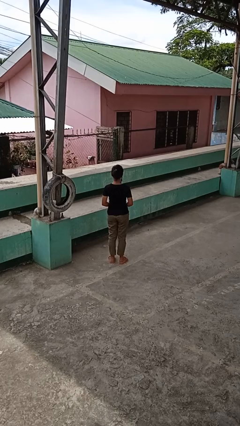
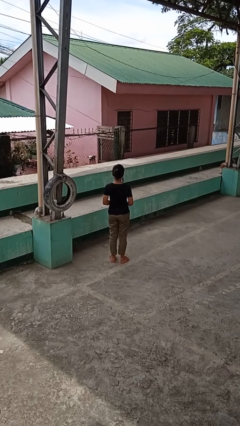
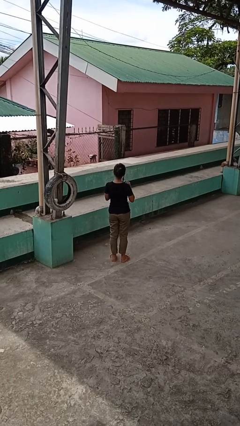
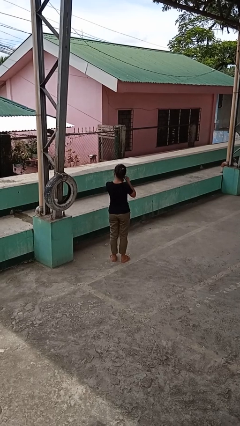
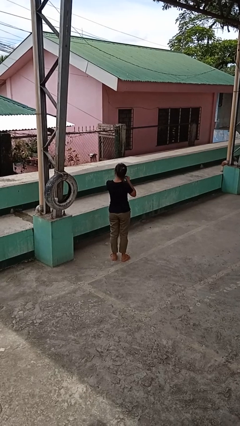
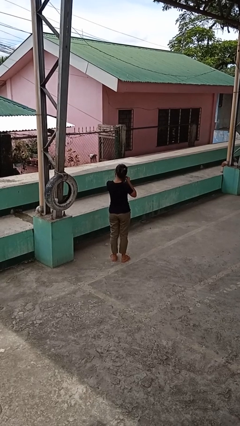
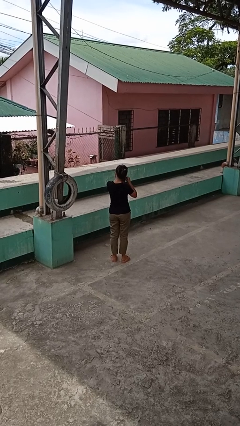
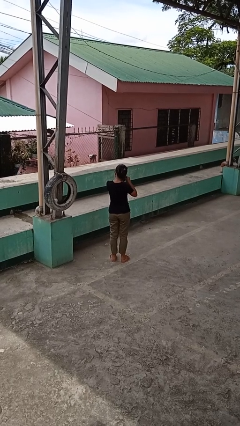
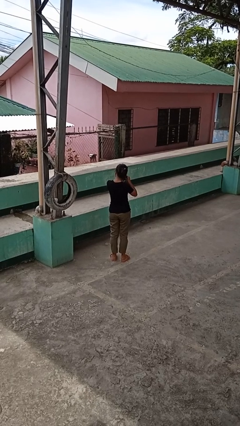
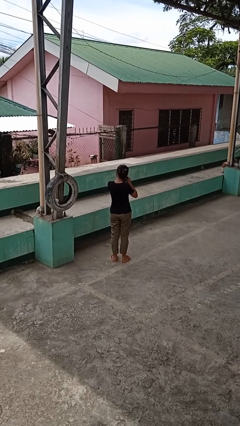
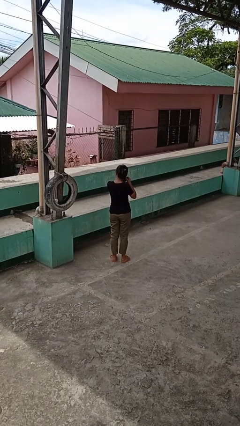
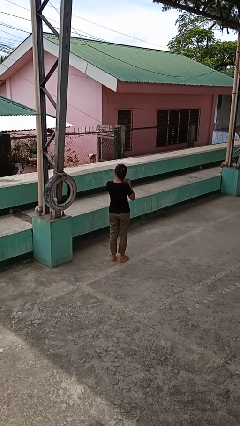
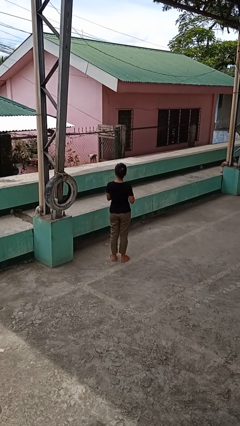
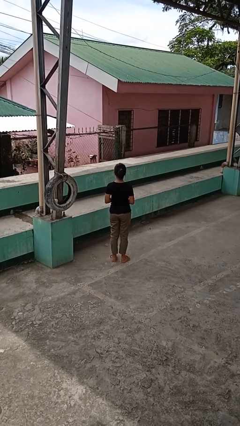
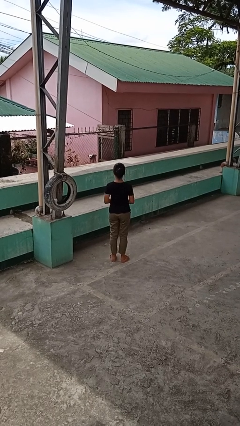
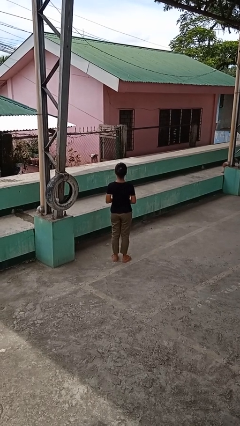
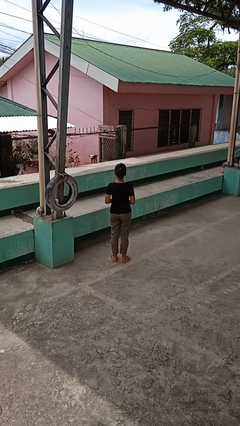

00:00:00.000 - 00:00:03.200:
person takes off earrings

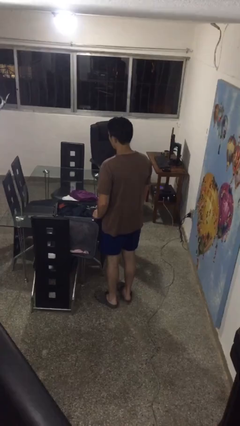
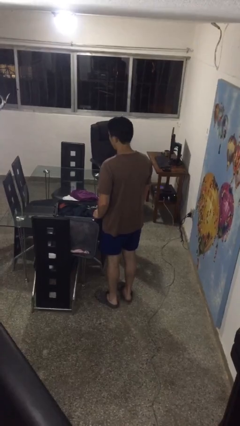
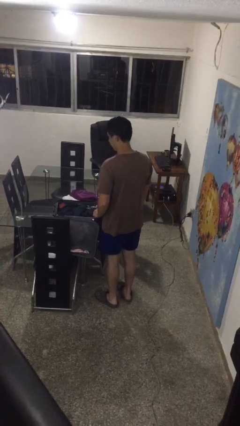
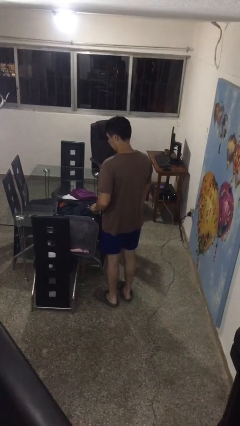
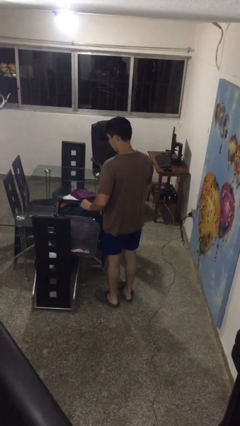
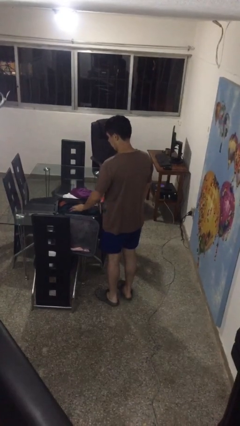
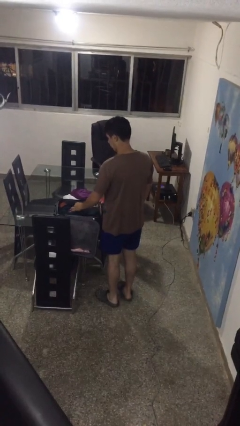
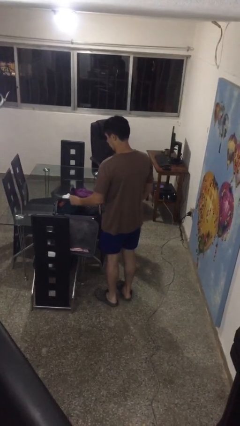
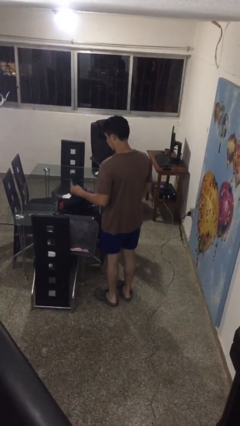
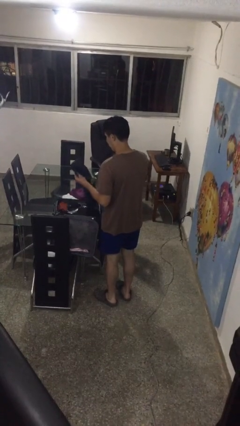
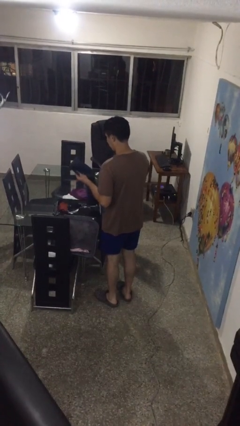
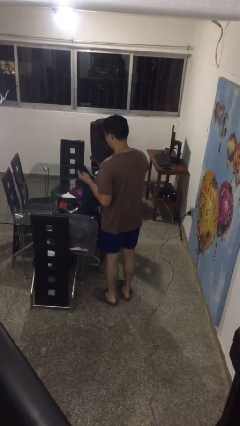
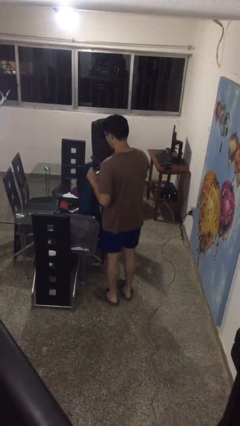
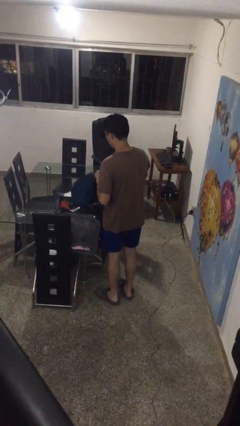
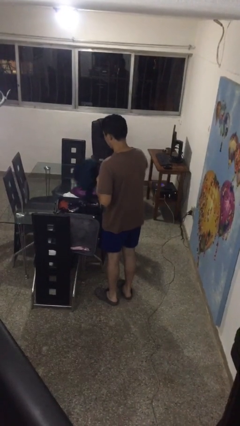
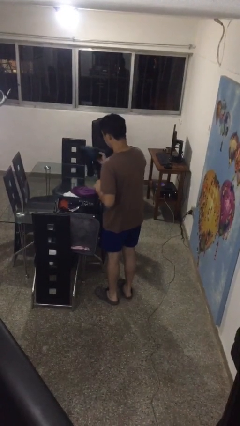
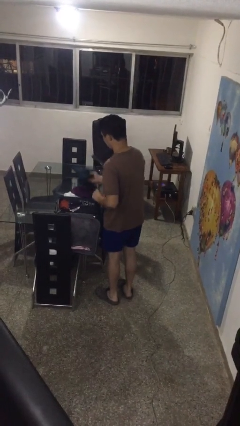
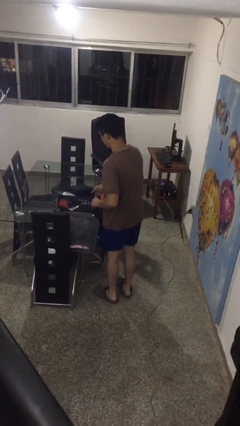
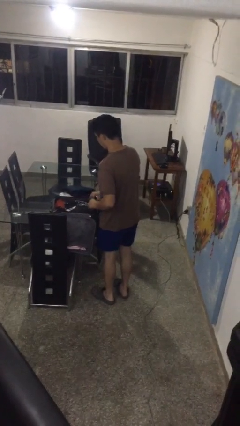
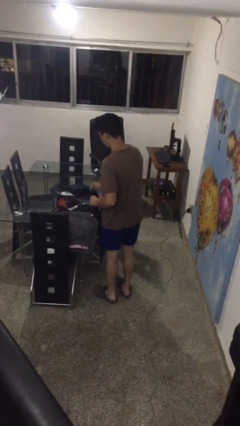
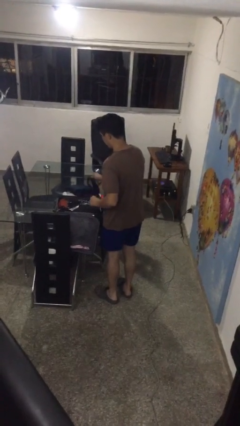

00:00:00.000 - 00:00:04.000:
person unloads clothes from suitcase

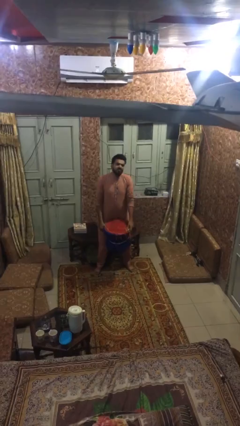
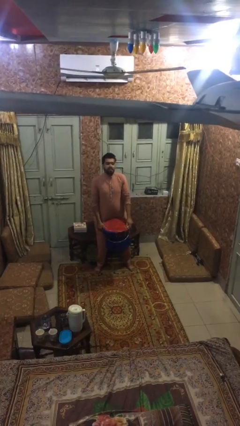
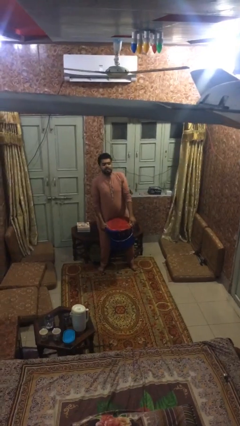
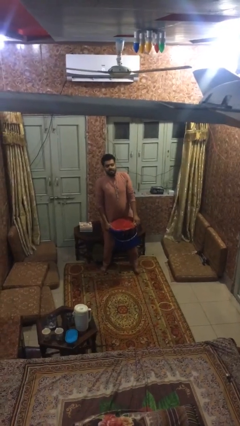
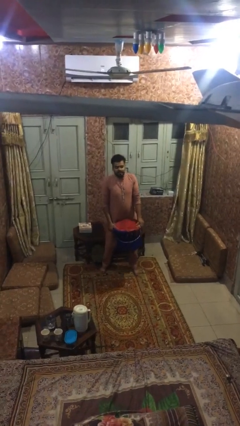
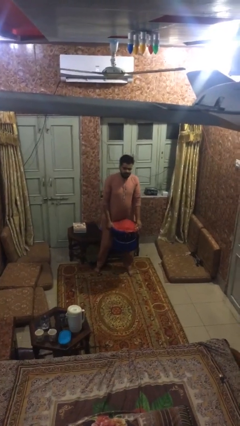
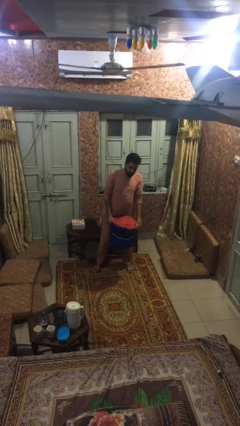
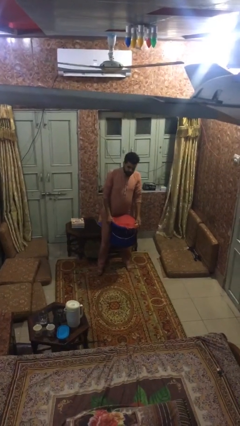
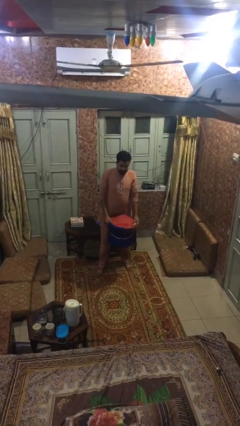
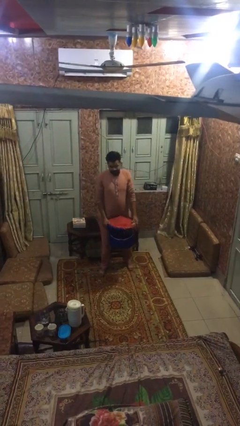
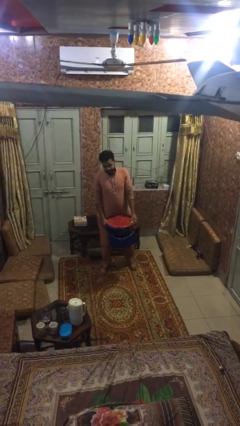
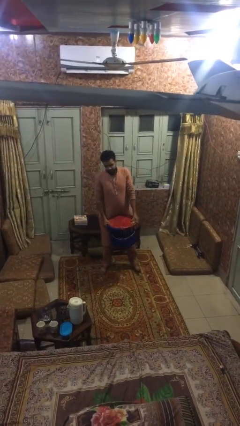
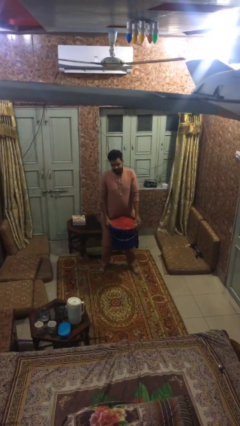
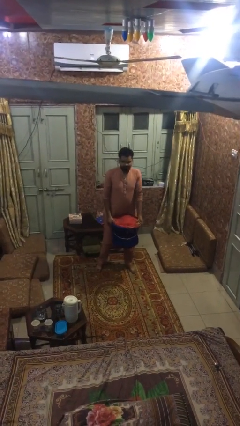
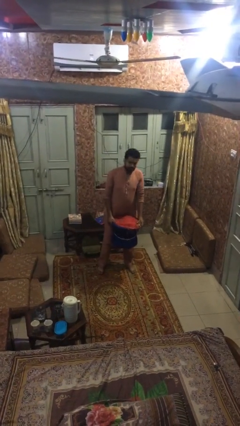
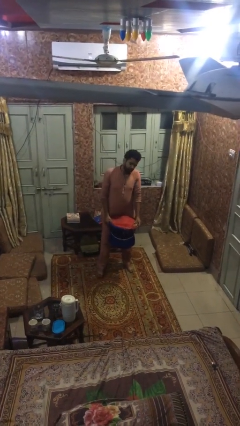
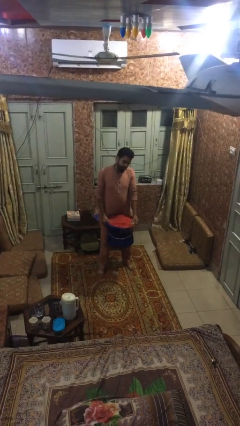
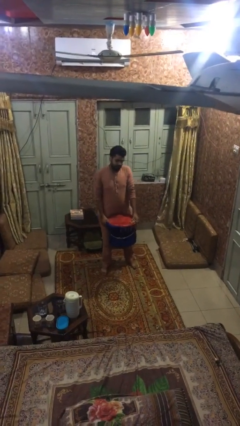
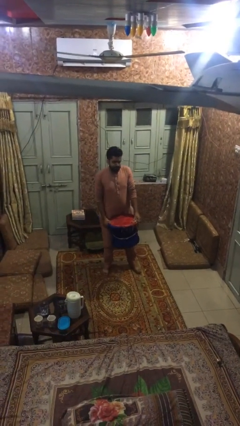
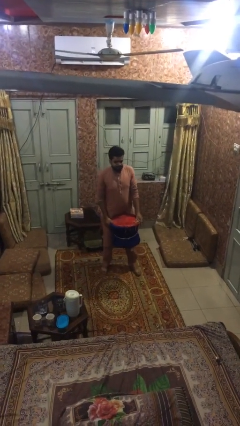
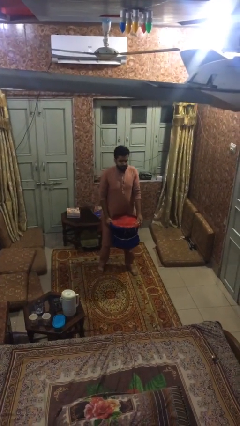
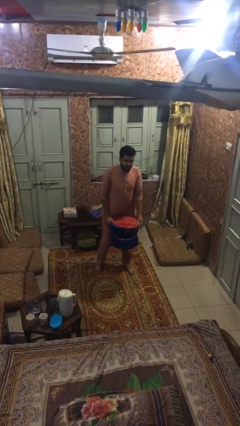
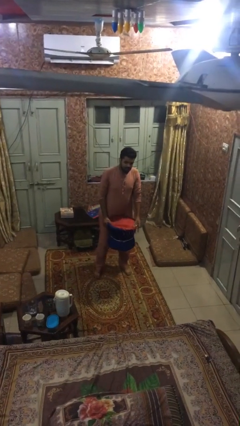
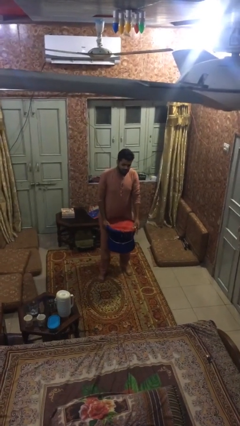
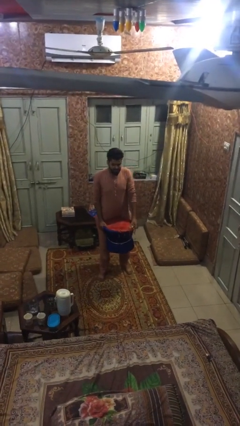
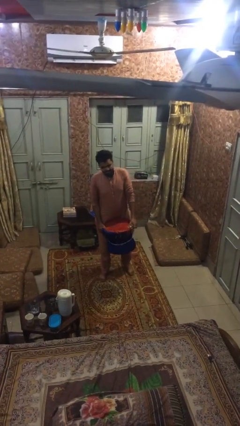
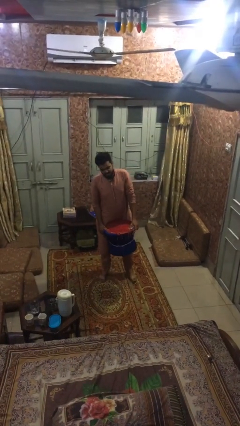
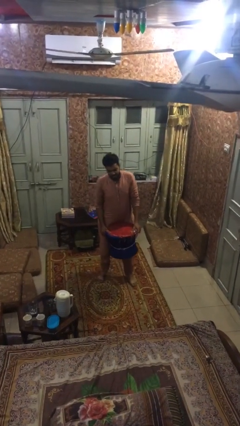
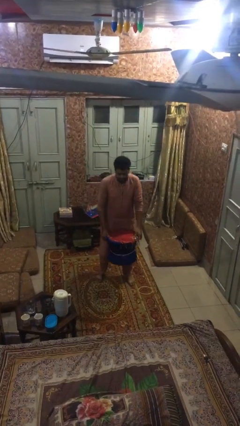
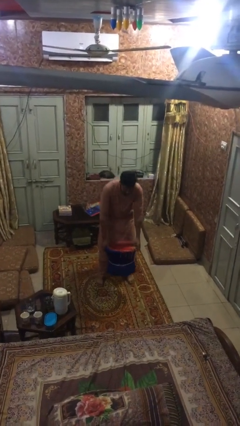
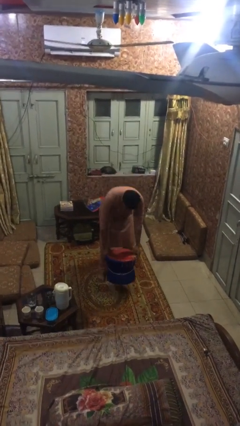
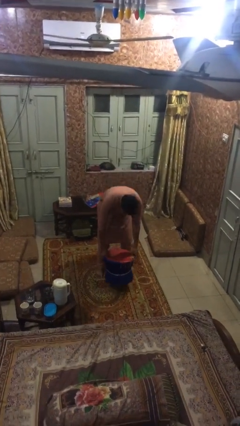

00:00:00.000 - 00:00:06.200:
person carries heavy object

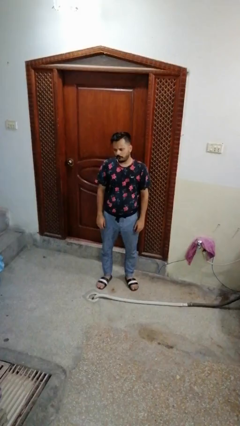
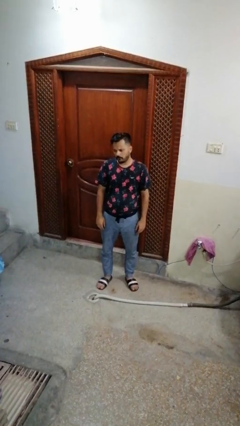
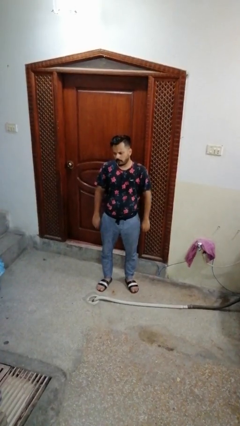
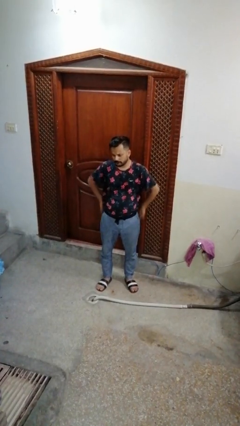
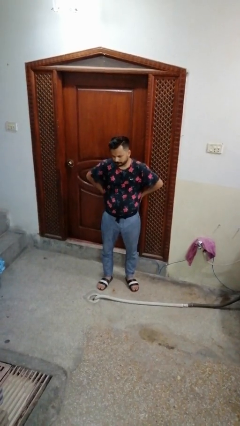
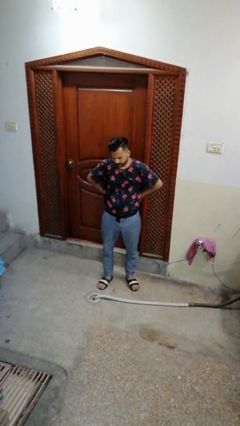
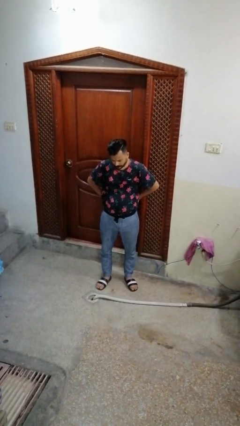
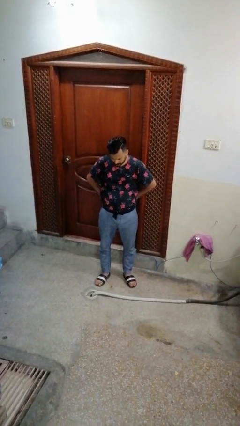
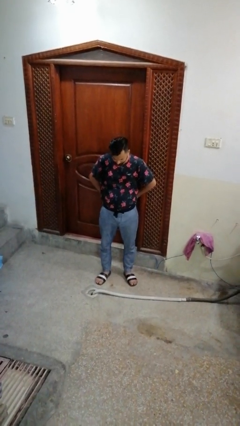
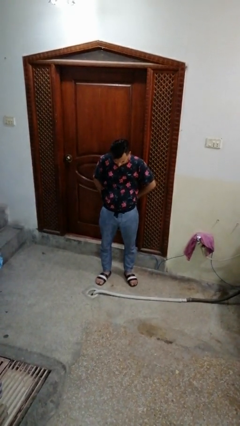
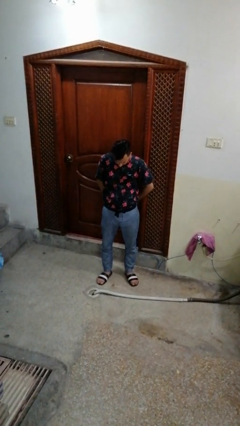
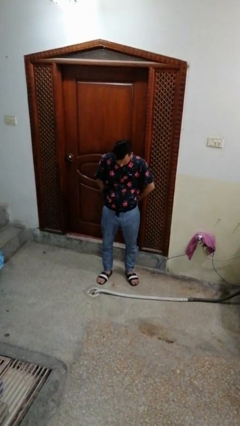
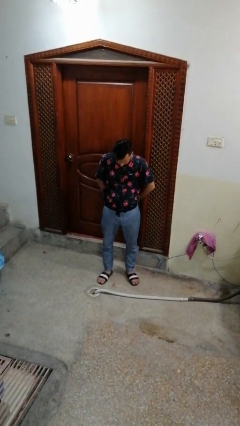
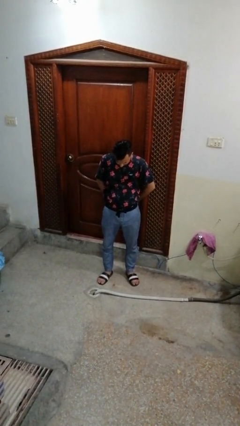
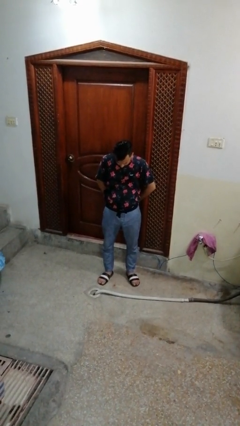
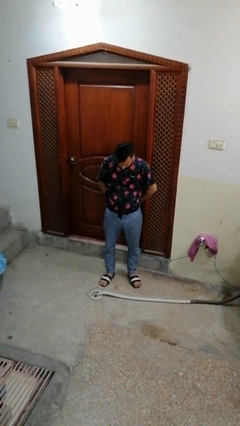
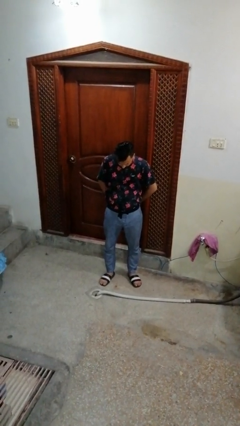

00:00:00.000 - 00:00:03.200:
person puts hands in back pockets

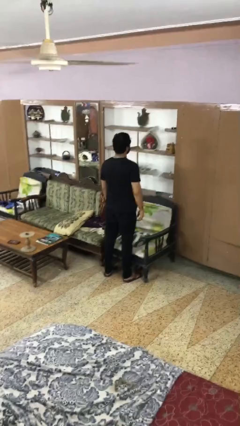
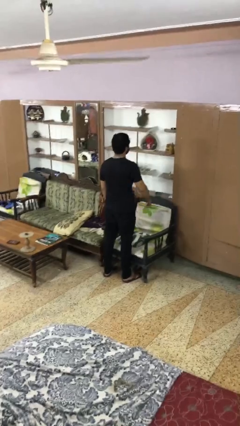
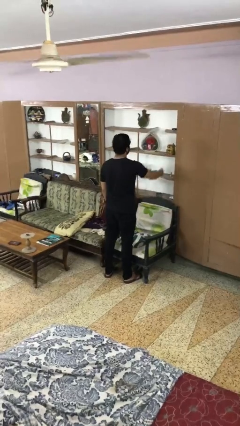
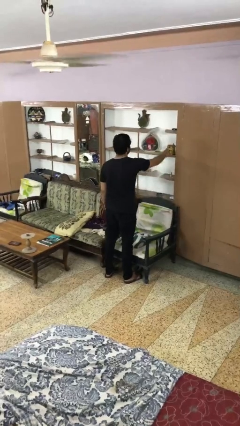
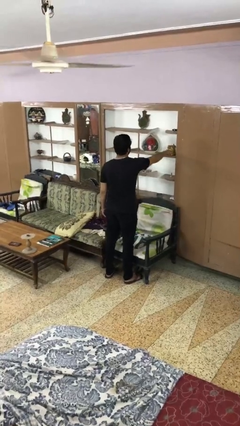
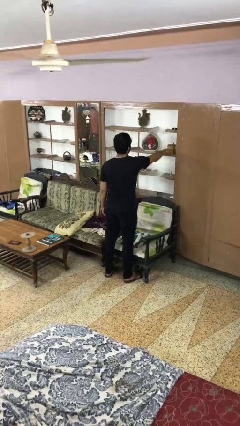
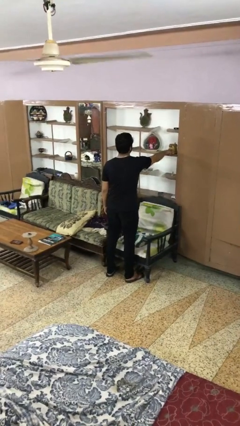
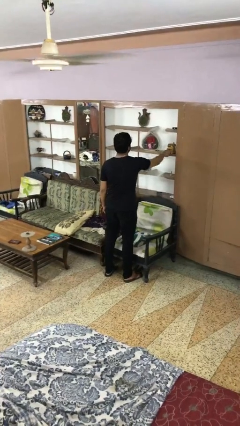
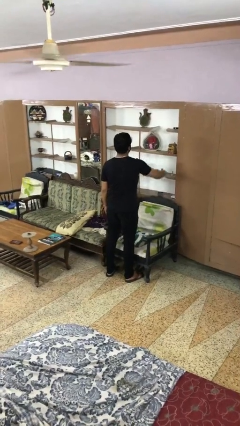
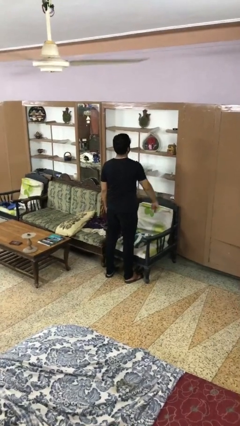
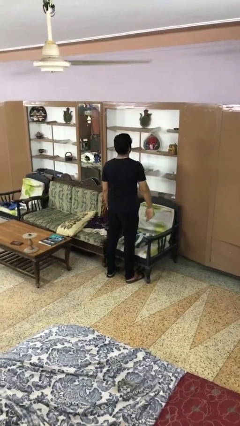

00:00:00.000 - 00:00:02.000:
person taps object with finger
